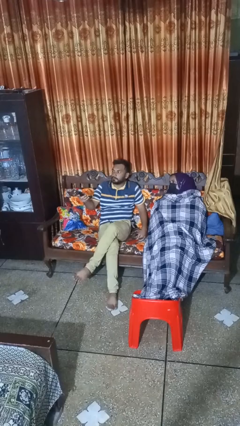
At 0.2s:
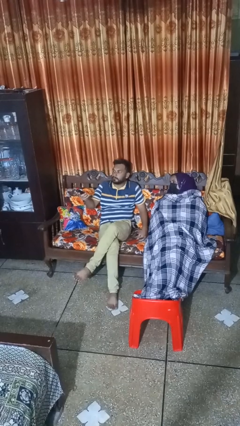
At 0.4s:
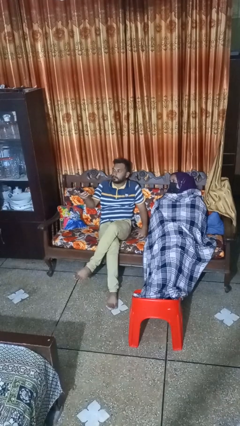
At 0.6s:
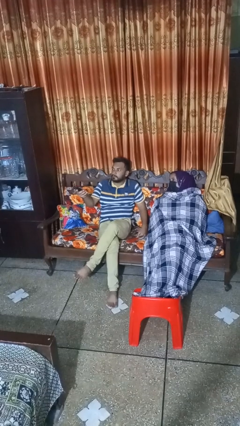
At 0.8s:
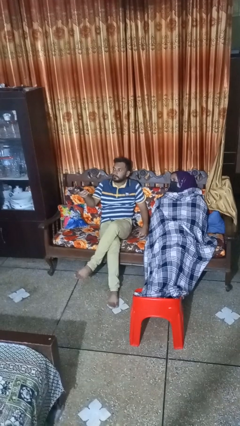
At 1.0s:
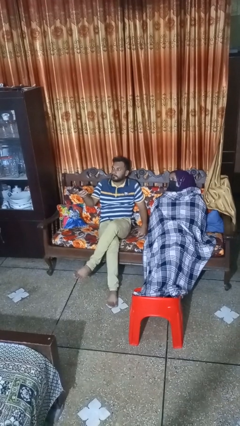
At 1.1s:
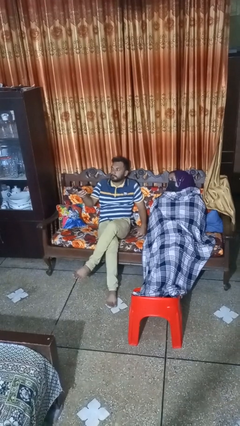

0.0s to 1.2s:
person covers friend with blanket

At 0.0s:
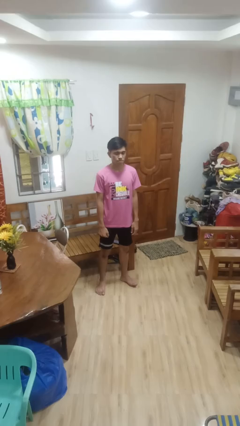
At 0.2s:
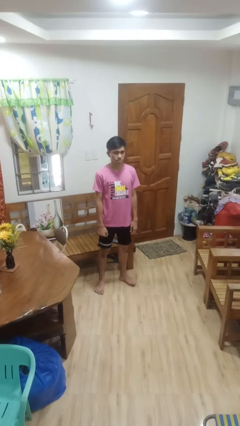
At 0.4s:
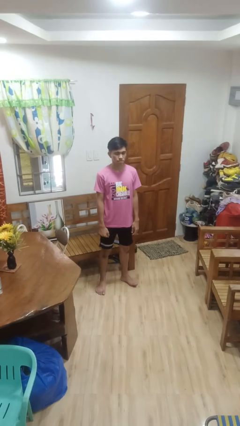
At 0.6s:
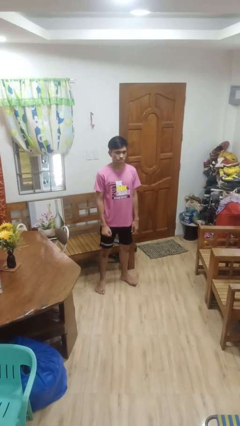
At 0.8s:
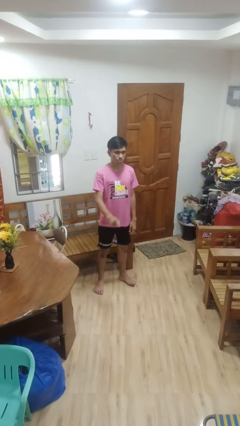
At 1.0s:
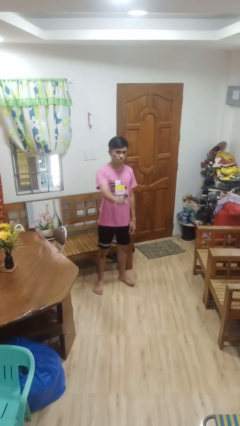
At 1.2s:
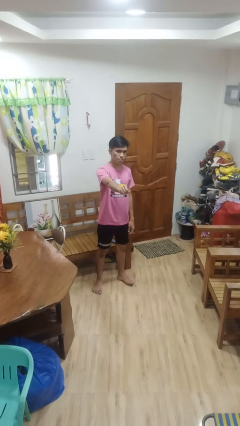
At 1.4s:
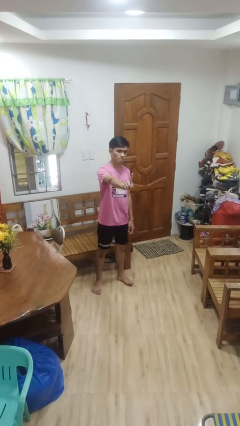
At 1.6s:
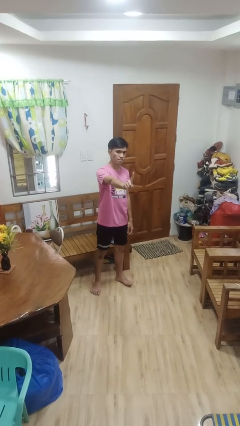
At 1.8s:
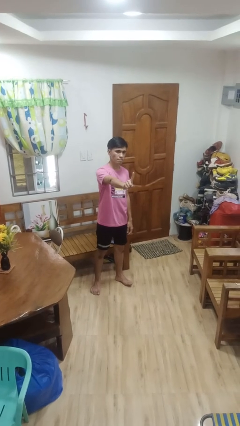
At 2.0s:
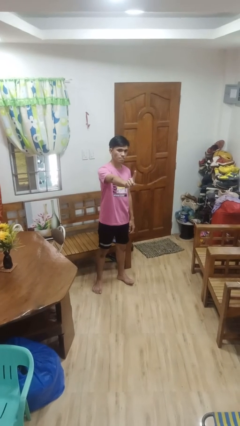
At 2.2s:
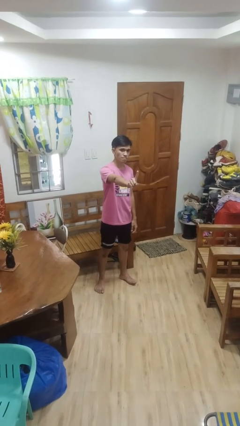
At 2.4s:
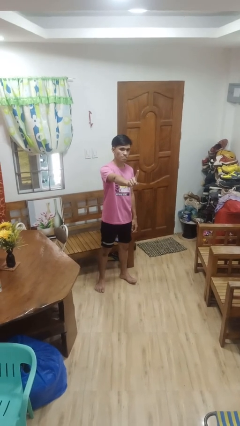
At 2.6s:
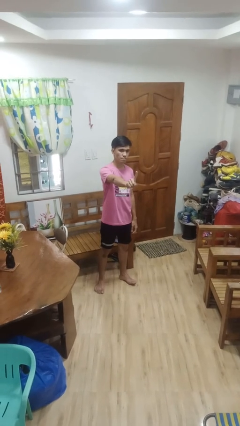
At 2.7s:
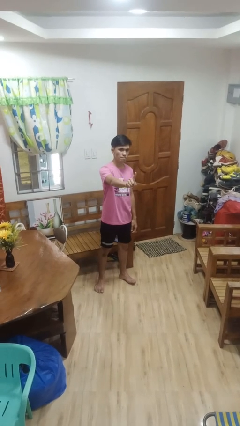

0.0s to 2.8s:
person gestures number one

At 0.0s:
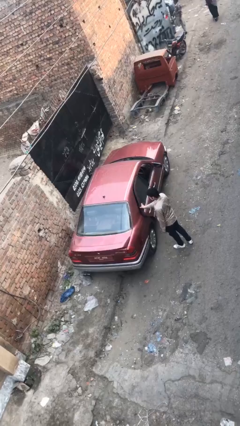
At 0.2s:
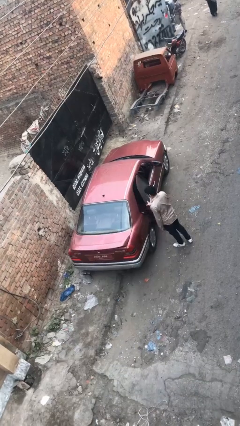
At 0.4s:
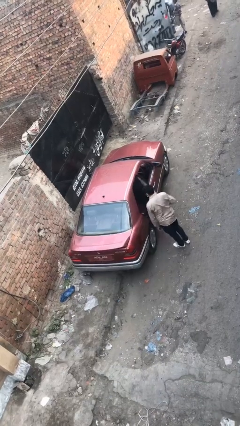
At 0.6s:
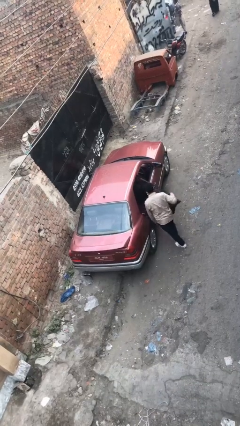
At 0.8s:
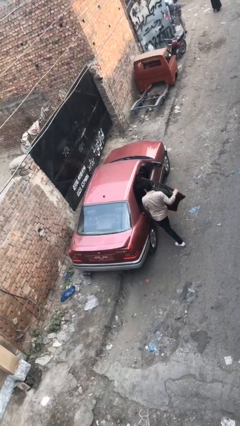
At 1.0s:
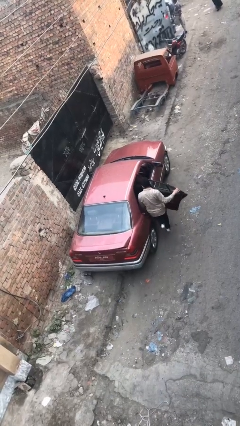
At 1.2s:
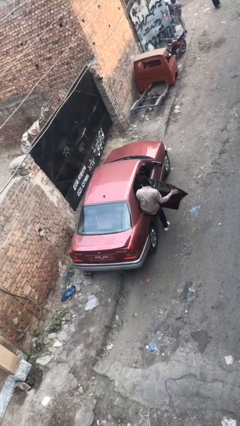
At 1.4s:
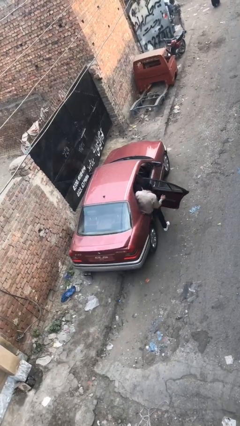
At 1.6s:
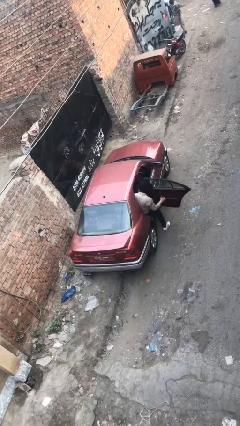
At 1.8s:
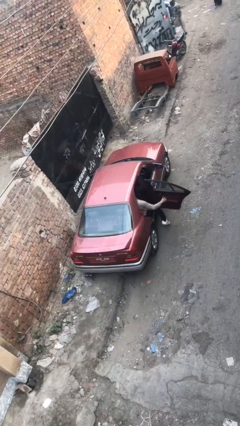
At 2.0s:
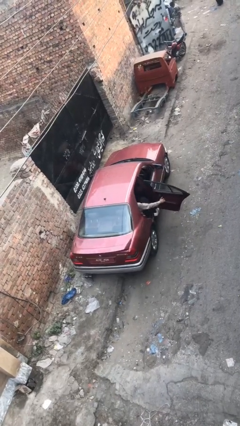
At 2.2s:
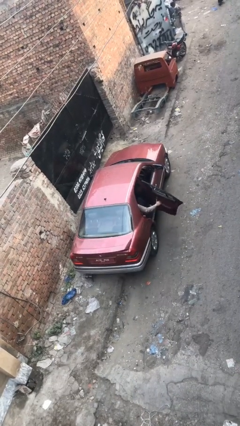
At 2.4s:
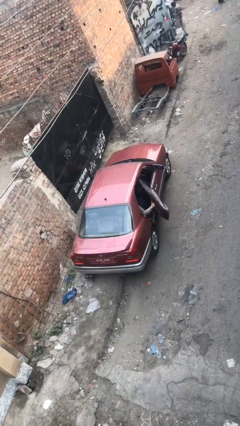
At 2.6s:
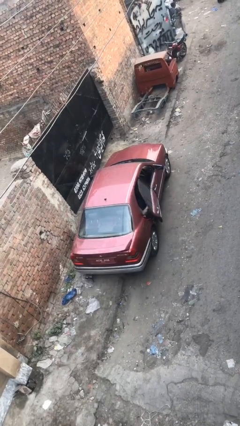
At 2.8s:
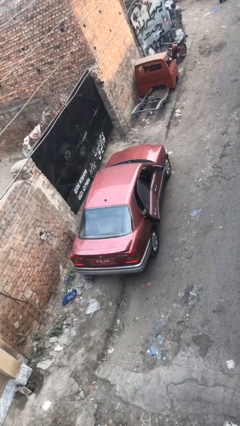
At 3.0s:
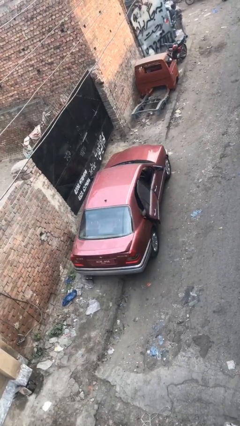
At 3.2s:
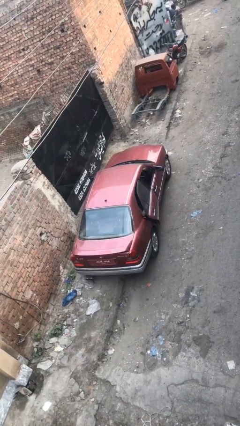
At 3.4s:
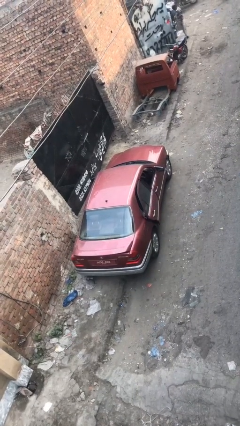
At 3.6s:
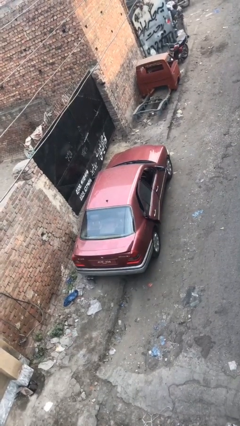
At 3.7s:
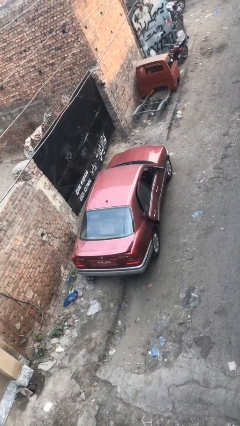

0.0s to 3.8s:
car picks up person

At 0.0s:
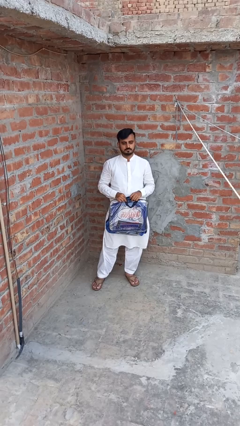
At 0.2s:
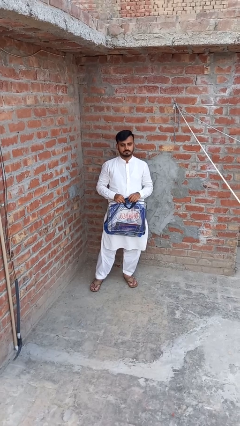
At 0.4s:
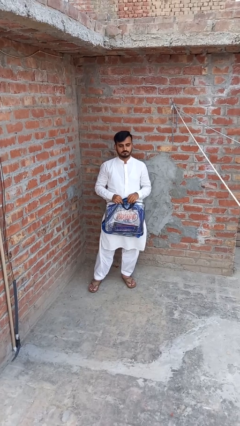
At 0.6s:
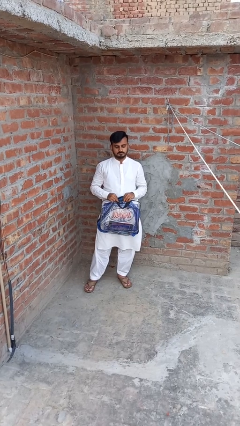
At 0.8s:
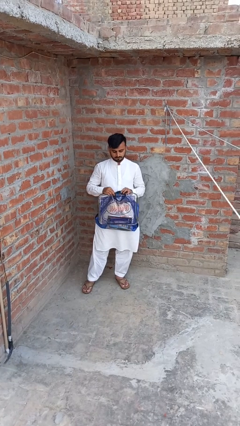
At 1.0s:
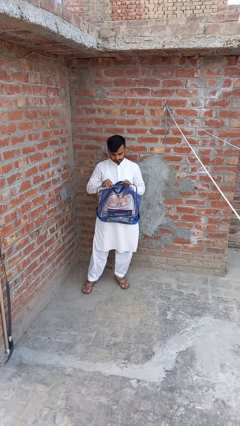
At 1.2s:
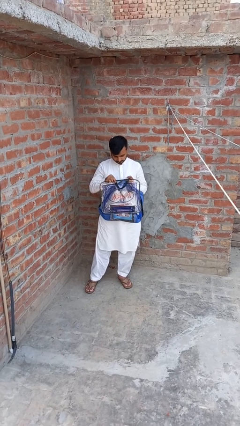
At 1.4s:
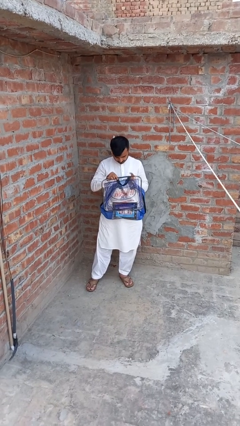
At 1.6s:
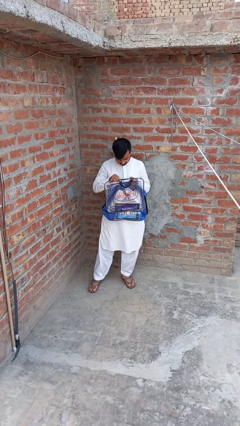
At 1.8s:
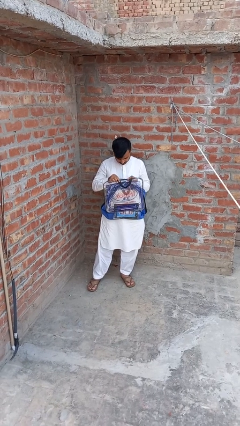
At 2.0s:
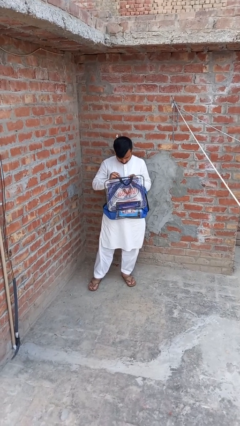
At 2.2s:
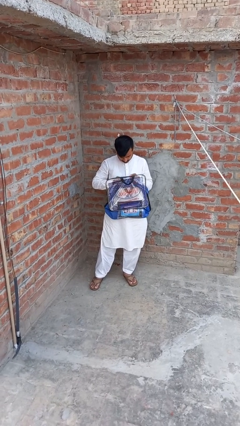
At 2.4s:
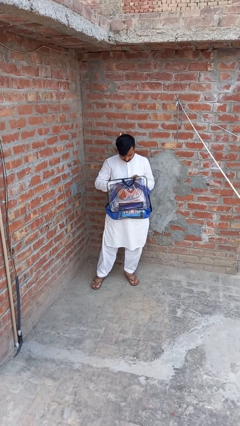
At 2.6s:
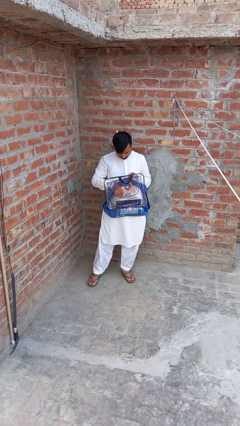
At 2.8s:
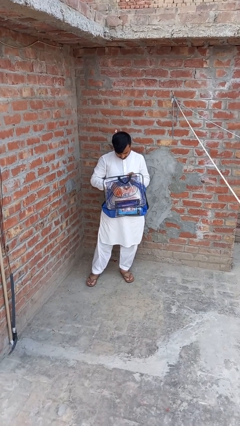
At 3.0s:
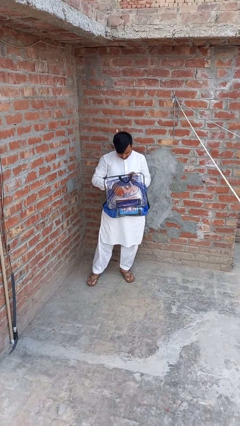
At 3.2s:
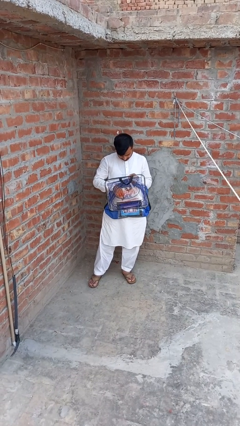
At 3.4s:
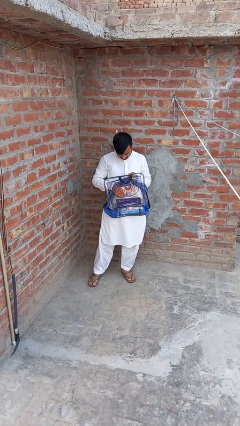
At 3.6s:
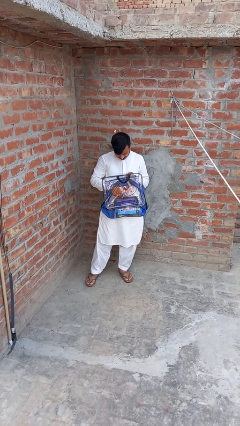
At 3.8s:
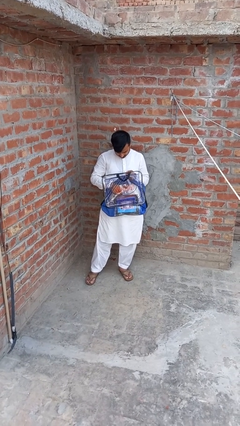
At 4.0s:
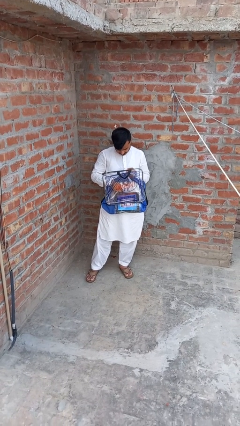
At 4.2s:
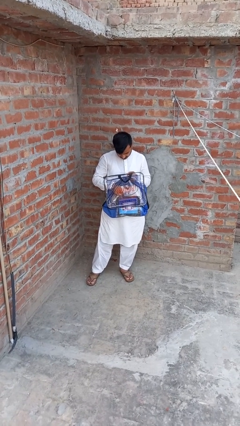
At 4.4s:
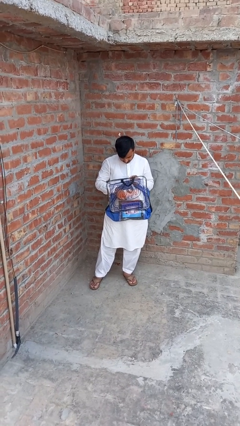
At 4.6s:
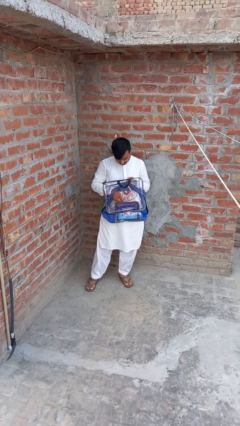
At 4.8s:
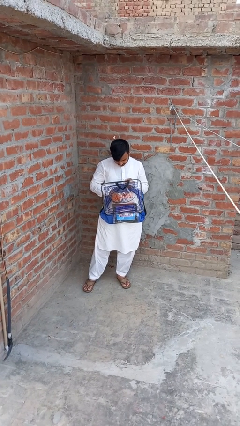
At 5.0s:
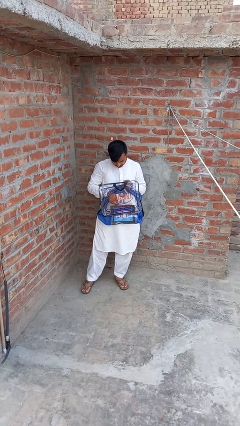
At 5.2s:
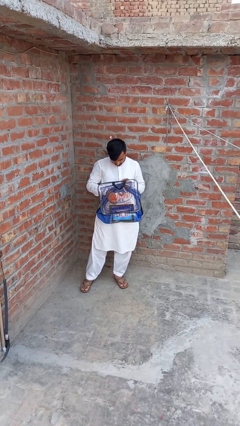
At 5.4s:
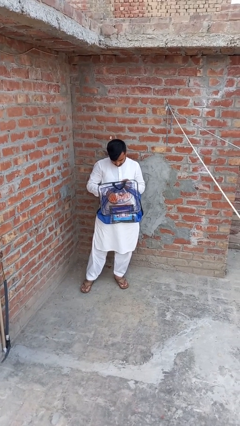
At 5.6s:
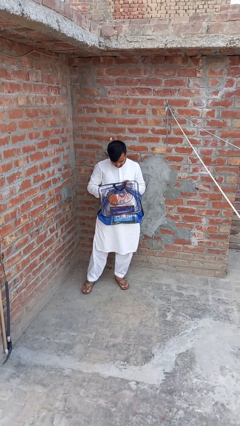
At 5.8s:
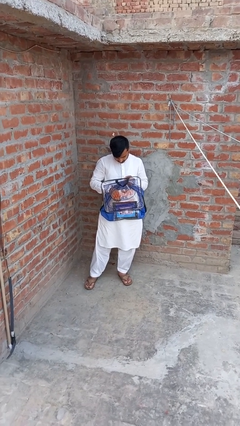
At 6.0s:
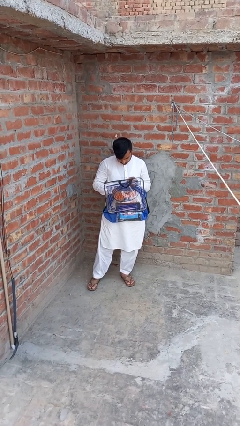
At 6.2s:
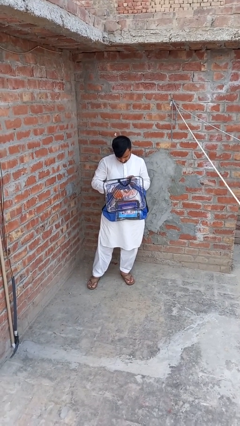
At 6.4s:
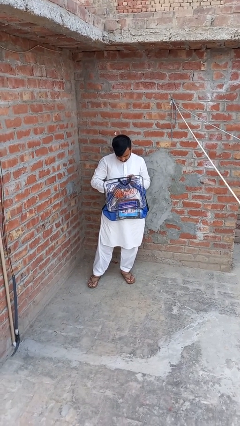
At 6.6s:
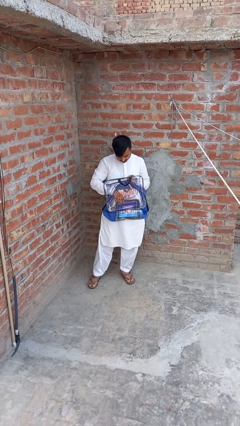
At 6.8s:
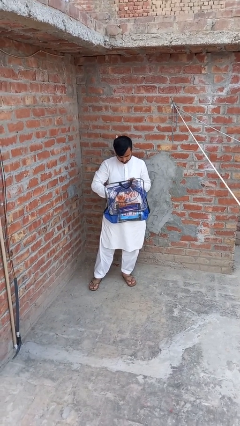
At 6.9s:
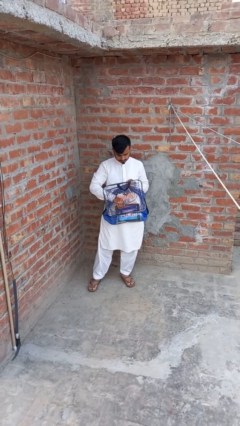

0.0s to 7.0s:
person searches in backpack

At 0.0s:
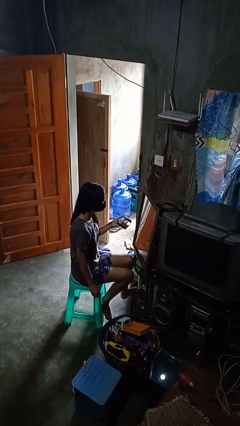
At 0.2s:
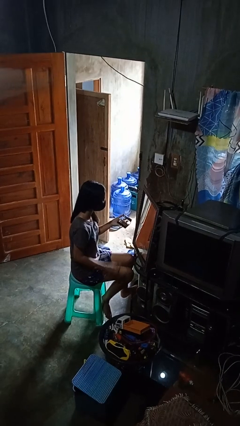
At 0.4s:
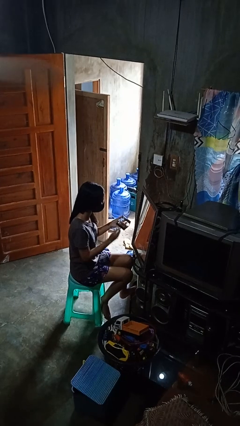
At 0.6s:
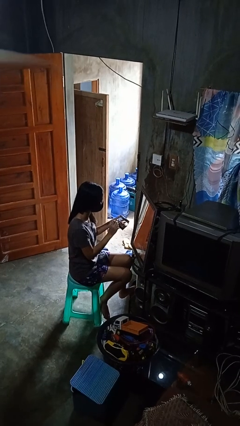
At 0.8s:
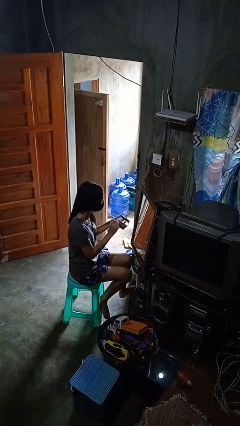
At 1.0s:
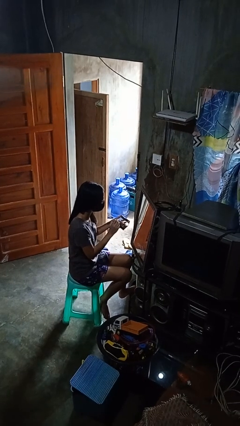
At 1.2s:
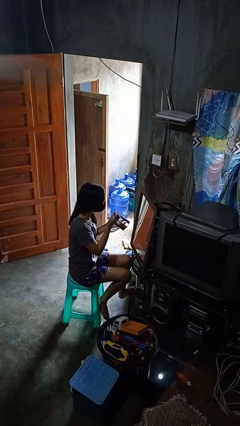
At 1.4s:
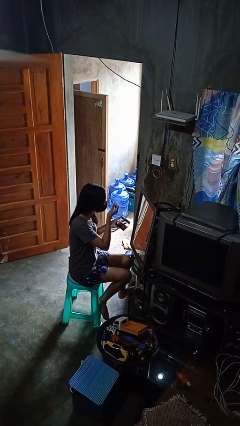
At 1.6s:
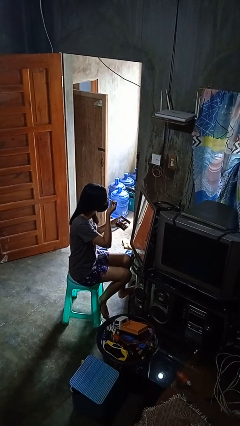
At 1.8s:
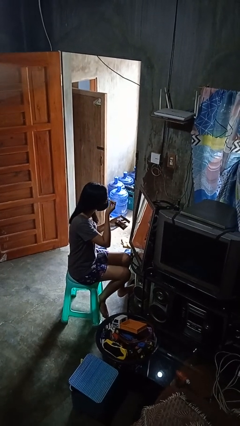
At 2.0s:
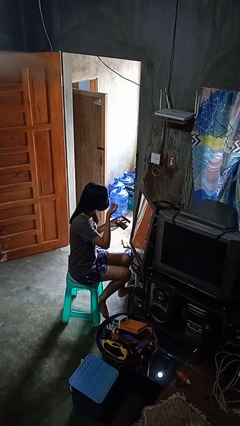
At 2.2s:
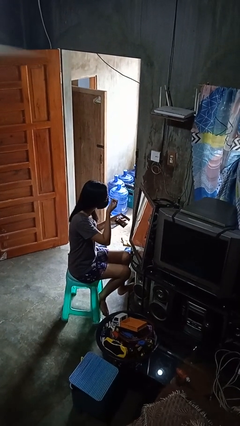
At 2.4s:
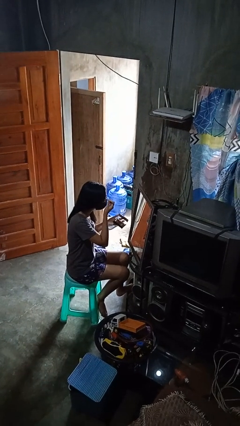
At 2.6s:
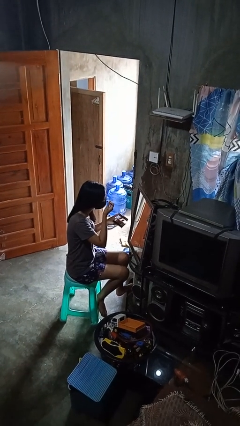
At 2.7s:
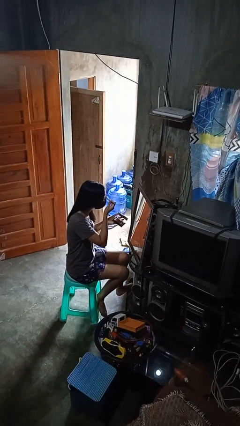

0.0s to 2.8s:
person applies eye makeup

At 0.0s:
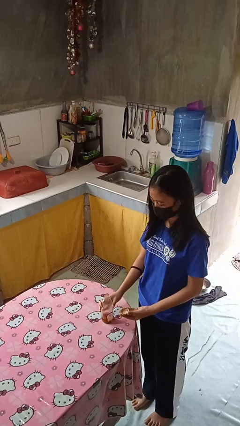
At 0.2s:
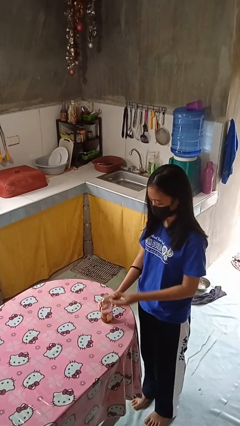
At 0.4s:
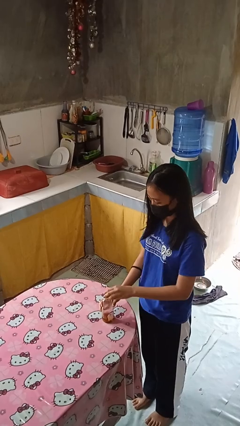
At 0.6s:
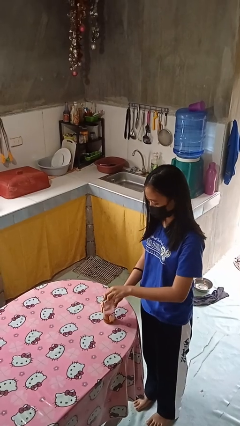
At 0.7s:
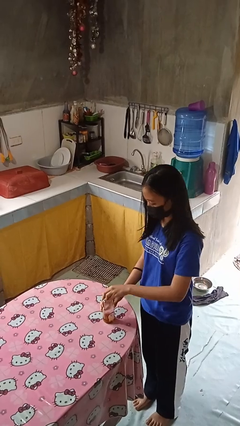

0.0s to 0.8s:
person closes jar
